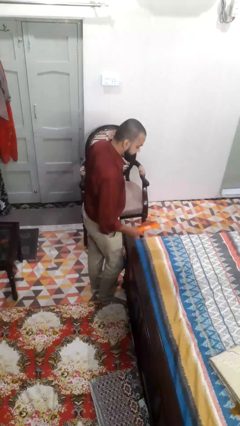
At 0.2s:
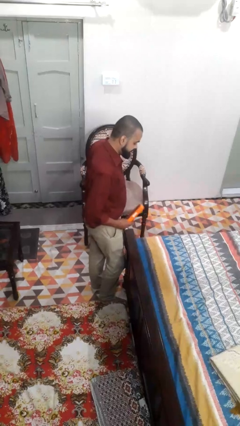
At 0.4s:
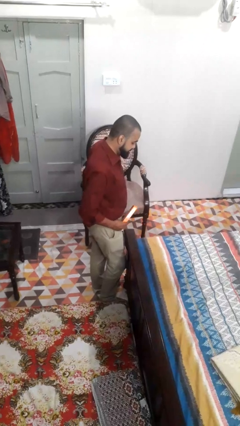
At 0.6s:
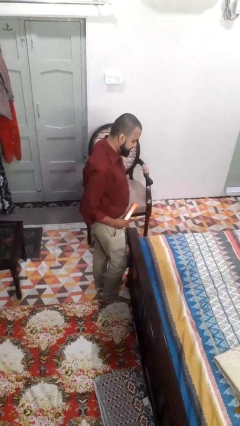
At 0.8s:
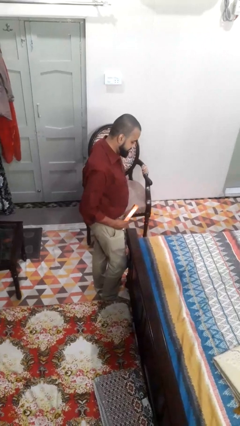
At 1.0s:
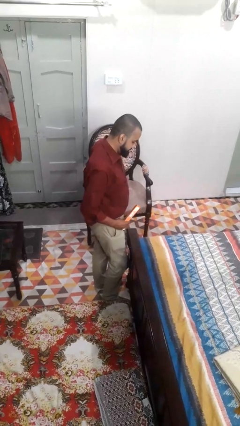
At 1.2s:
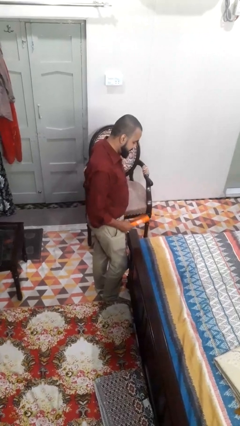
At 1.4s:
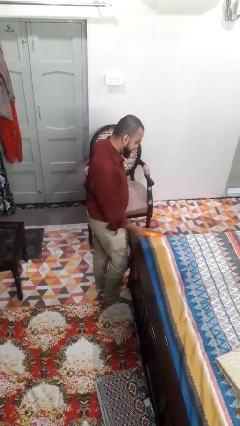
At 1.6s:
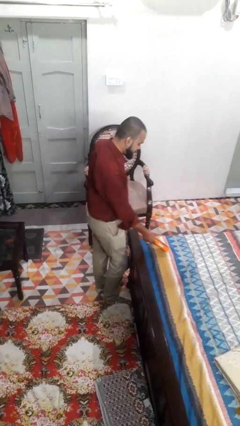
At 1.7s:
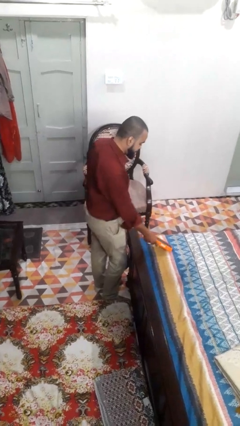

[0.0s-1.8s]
person picks up object from bed

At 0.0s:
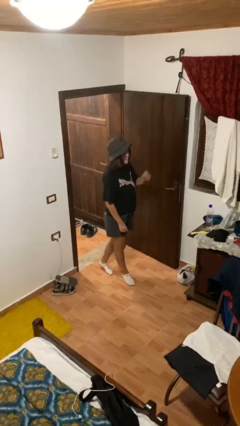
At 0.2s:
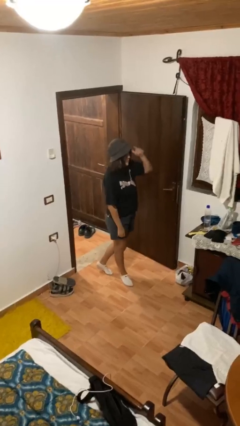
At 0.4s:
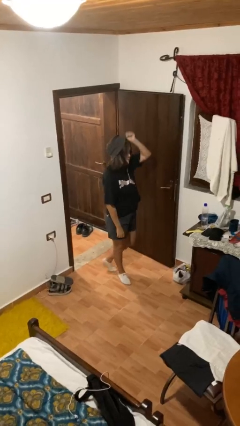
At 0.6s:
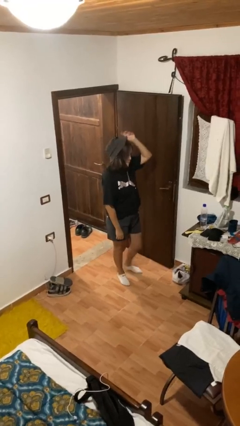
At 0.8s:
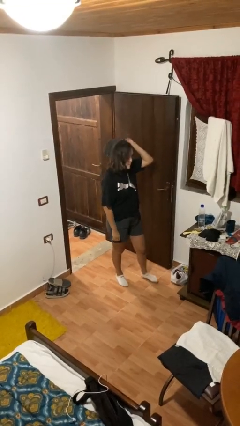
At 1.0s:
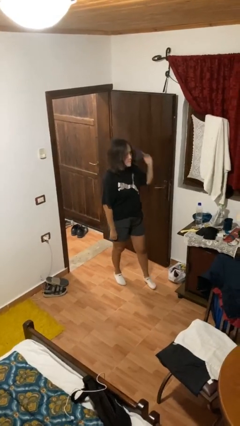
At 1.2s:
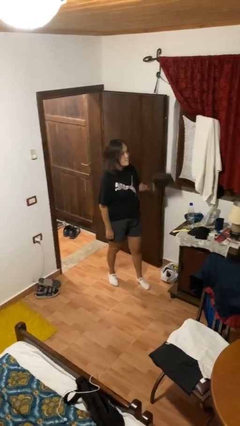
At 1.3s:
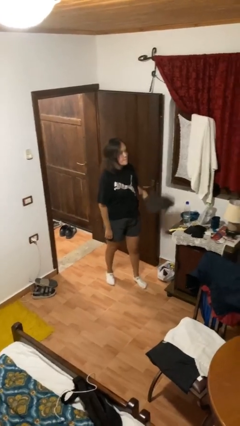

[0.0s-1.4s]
person takes off hat

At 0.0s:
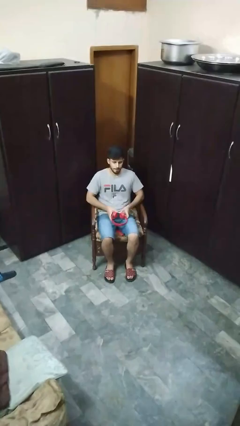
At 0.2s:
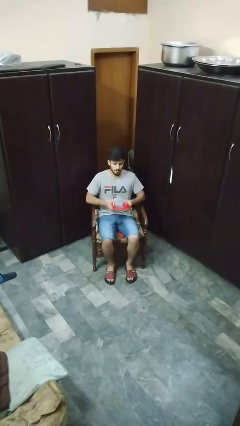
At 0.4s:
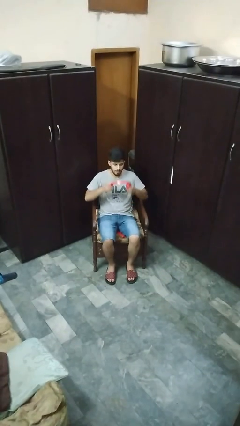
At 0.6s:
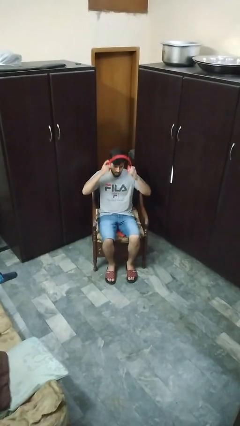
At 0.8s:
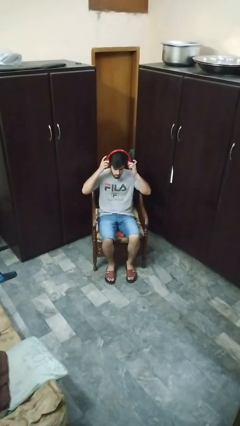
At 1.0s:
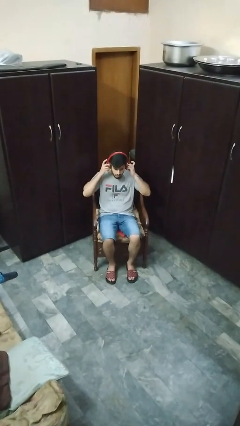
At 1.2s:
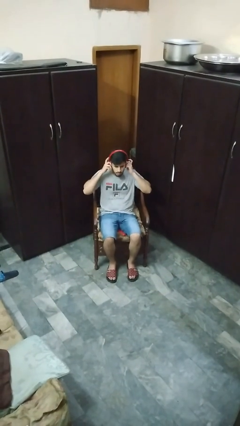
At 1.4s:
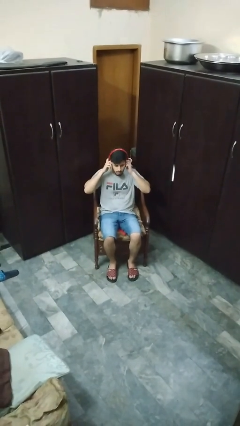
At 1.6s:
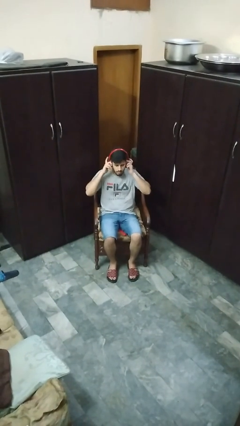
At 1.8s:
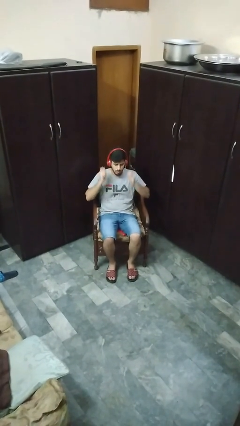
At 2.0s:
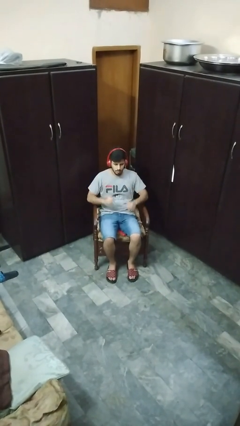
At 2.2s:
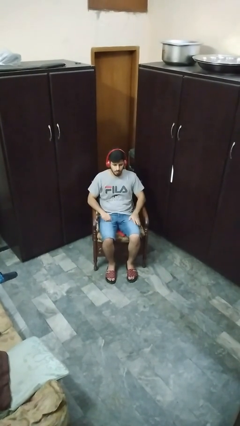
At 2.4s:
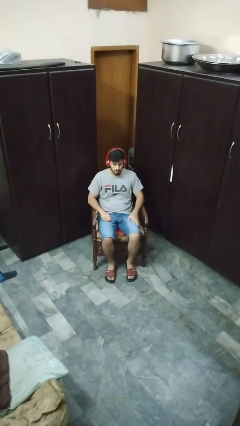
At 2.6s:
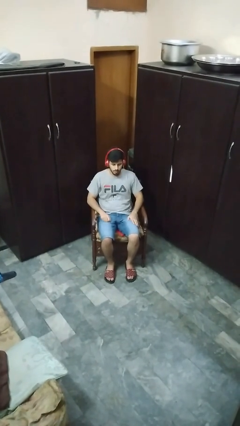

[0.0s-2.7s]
person puts on headphones

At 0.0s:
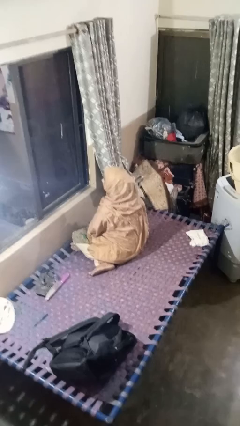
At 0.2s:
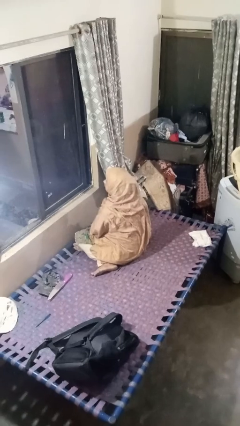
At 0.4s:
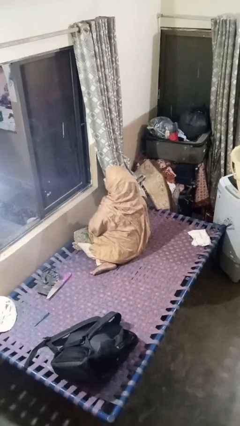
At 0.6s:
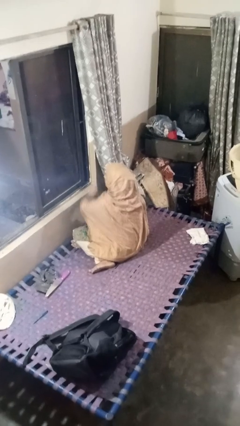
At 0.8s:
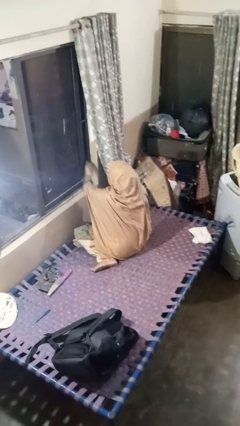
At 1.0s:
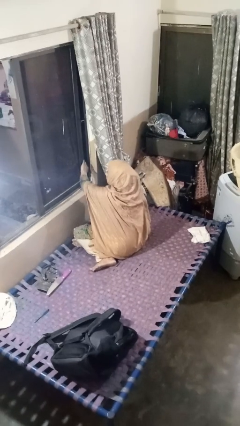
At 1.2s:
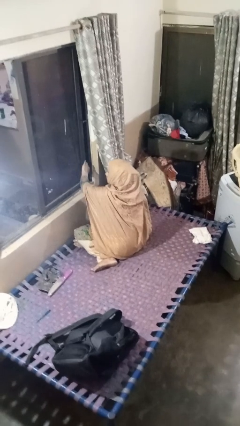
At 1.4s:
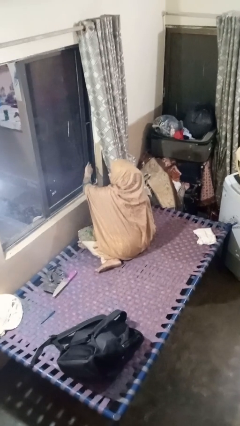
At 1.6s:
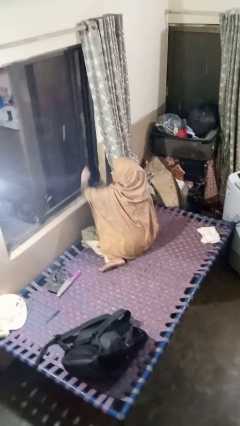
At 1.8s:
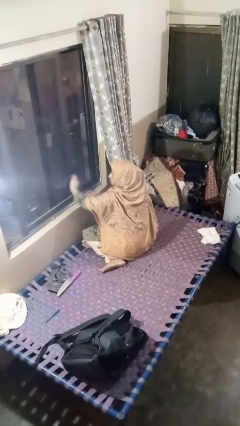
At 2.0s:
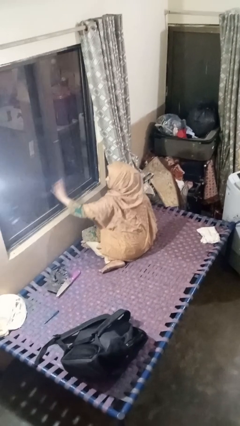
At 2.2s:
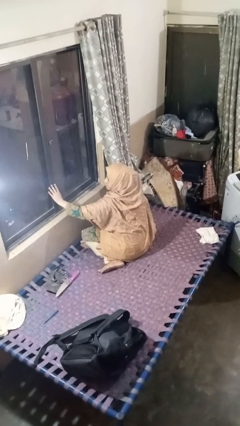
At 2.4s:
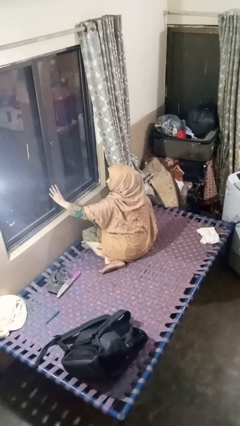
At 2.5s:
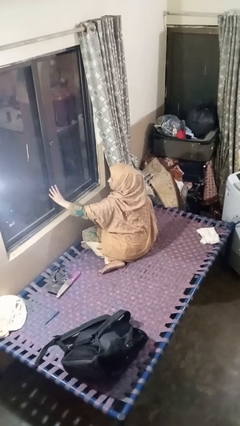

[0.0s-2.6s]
person closes home window

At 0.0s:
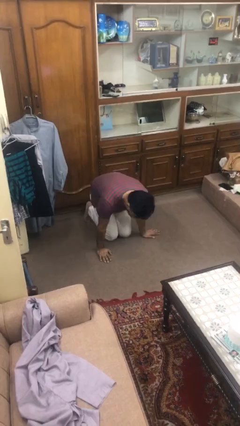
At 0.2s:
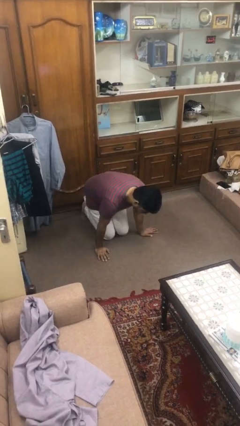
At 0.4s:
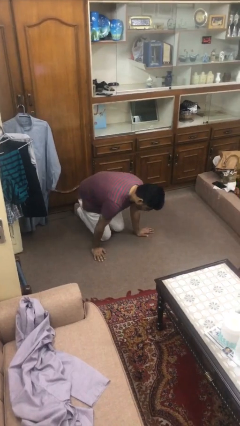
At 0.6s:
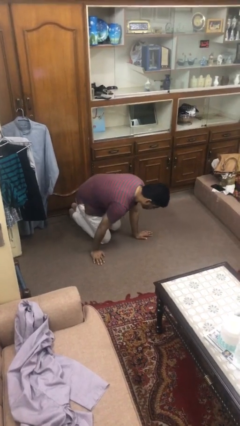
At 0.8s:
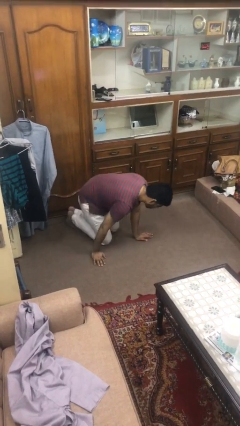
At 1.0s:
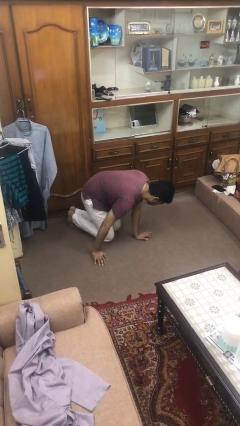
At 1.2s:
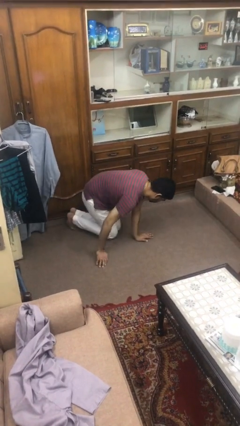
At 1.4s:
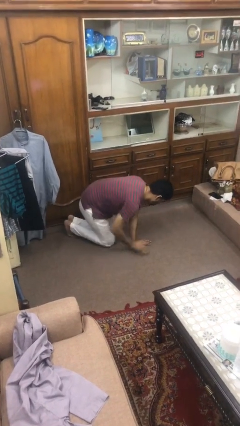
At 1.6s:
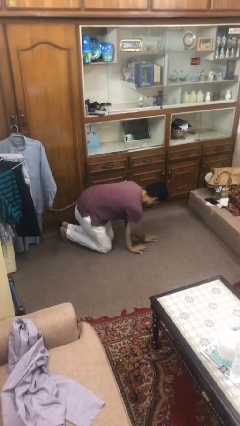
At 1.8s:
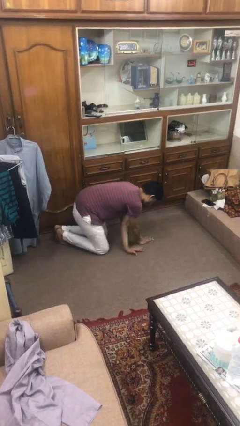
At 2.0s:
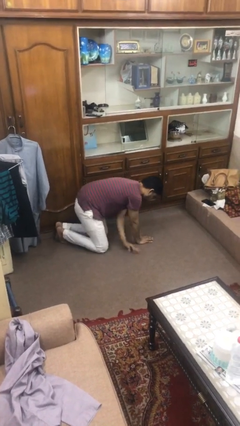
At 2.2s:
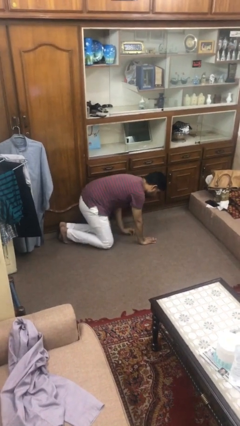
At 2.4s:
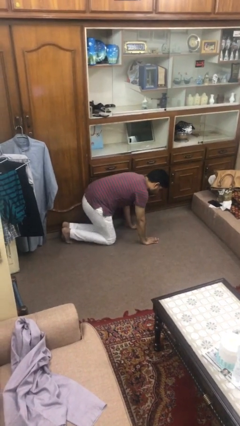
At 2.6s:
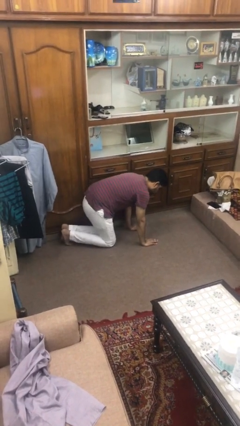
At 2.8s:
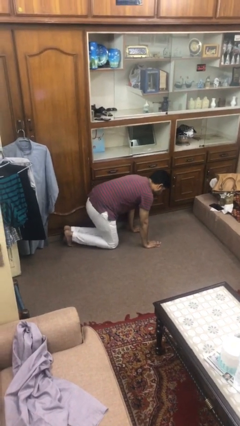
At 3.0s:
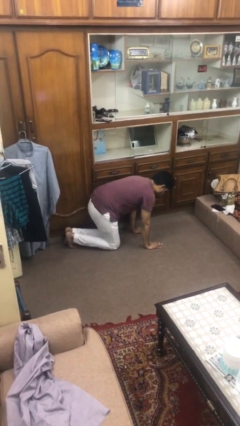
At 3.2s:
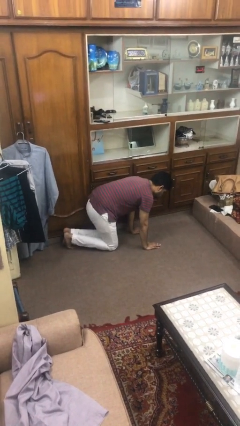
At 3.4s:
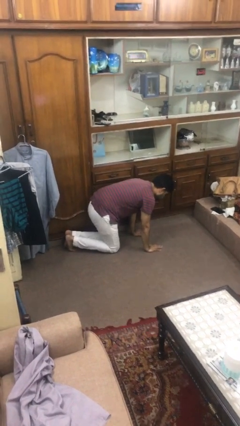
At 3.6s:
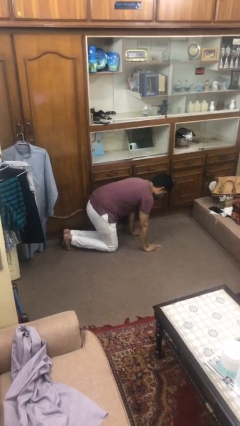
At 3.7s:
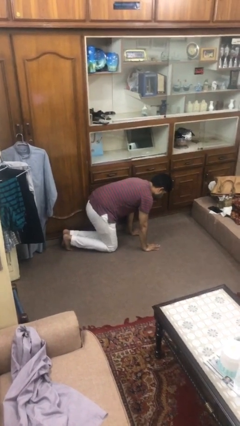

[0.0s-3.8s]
person crawls

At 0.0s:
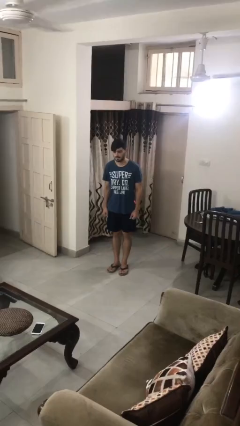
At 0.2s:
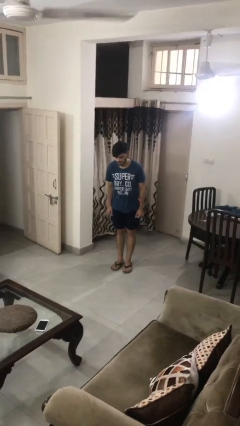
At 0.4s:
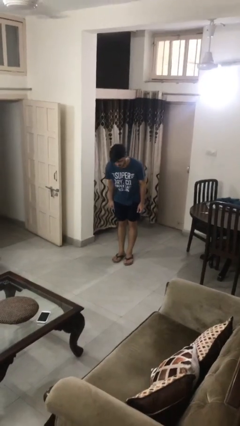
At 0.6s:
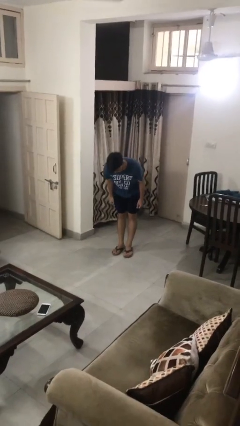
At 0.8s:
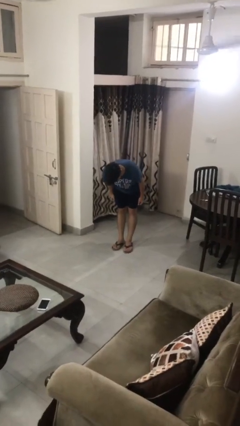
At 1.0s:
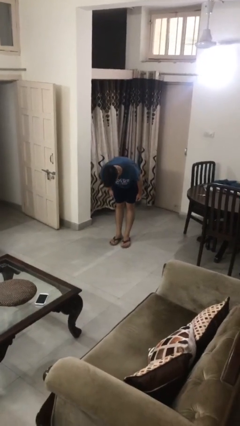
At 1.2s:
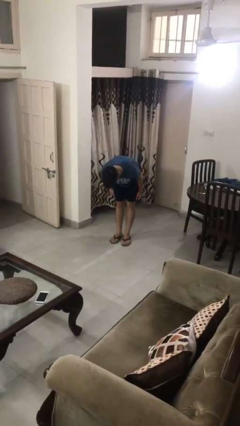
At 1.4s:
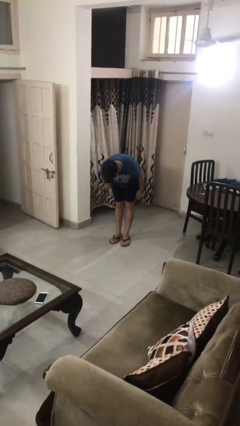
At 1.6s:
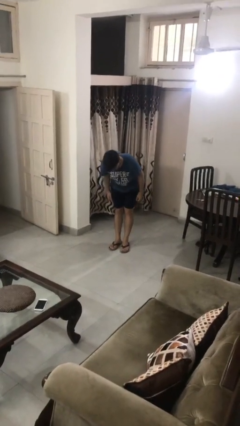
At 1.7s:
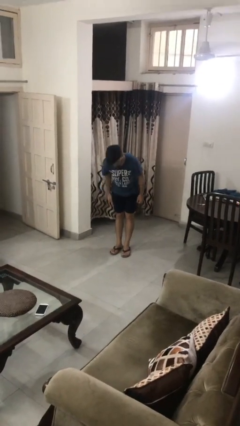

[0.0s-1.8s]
person bows

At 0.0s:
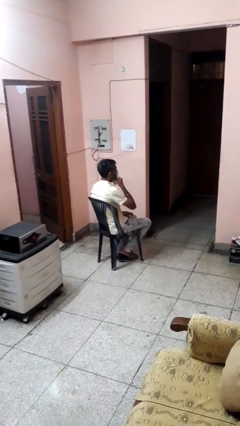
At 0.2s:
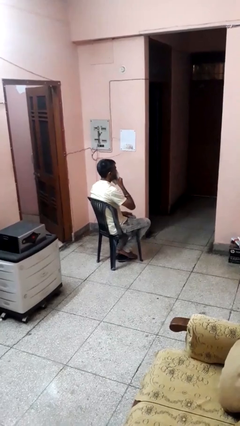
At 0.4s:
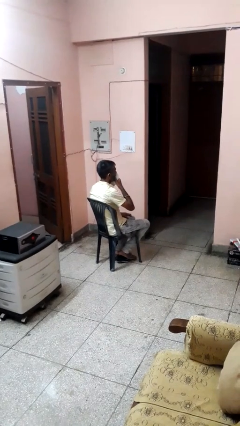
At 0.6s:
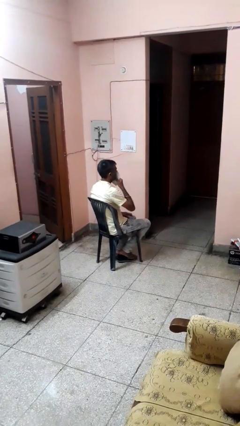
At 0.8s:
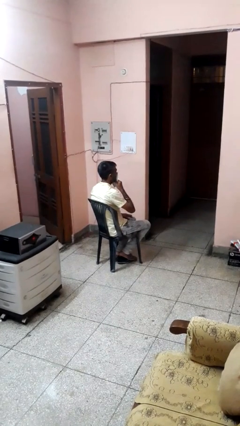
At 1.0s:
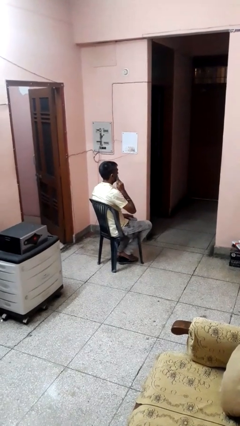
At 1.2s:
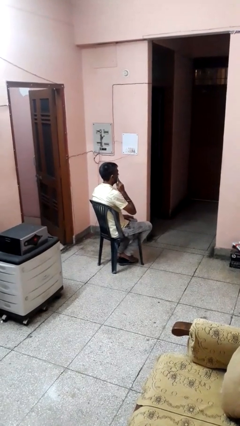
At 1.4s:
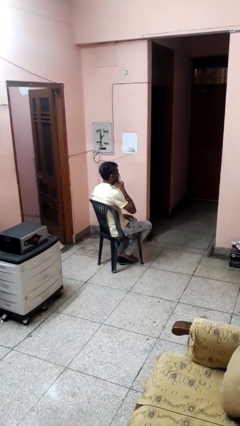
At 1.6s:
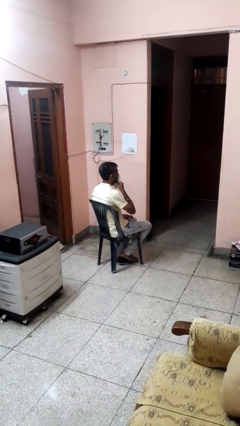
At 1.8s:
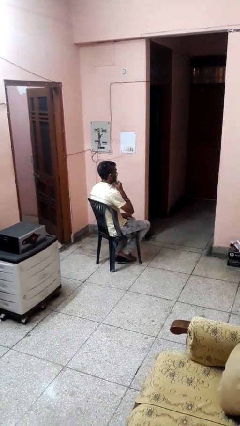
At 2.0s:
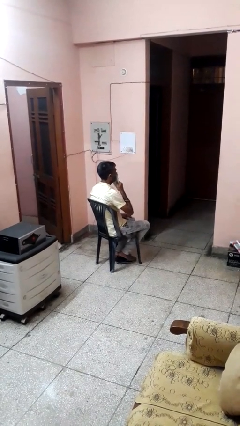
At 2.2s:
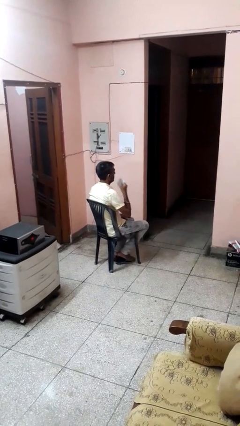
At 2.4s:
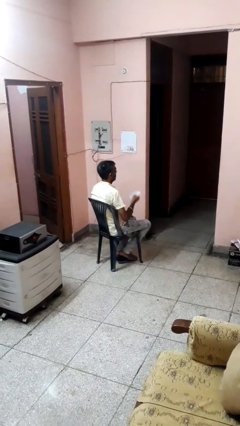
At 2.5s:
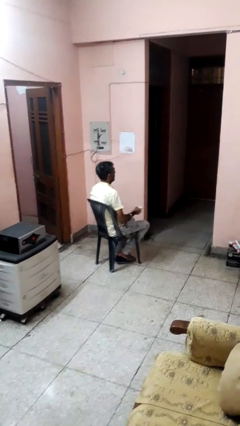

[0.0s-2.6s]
person wipes mouth with napkin

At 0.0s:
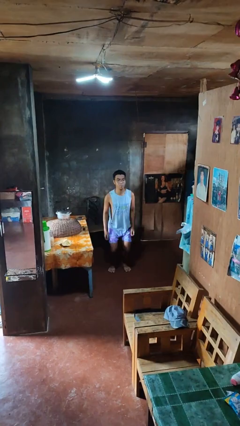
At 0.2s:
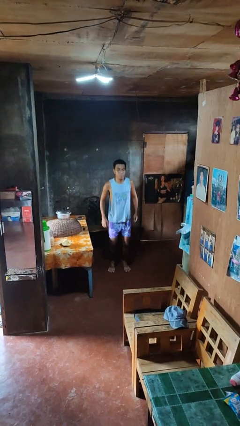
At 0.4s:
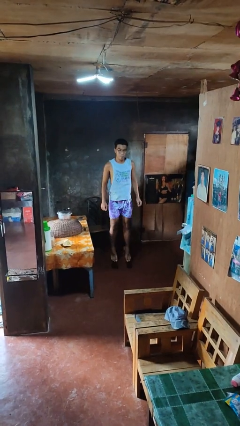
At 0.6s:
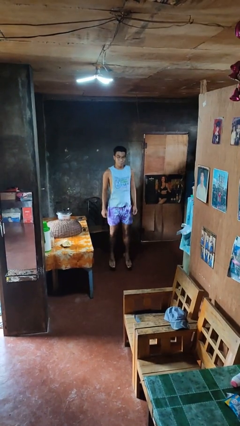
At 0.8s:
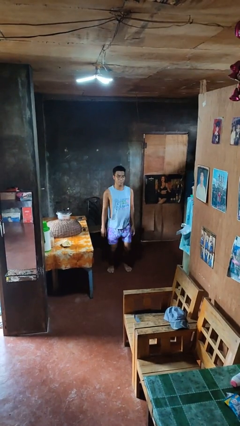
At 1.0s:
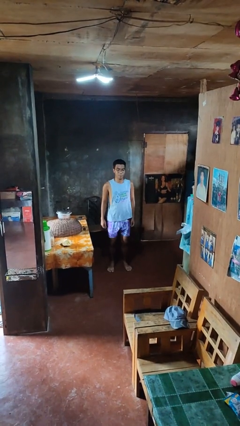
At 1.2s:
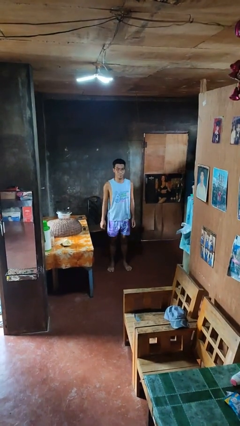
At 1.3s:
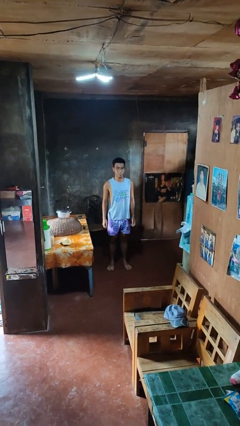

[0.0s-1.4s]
person jumps
